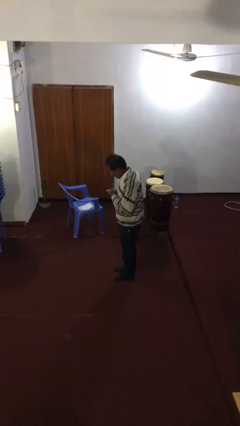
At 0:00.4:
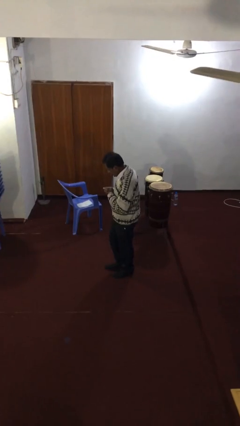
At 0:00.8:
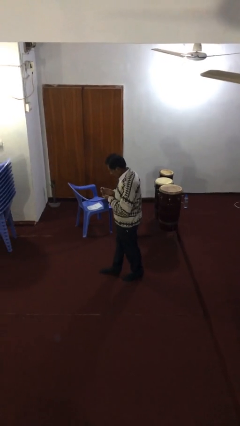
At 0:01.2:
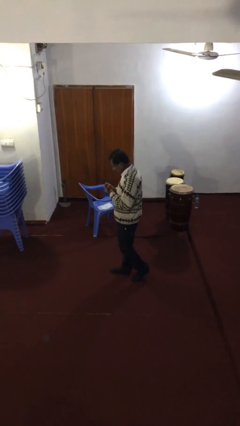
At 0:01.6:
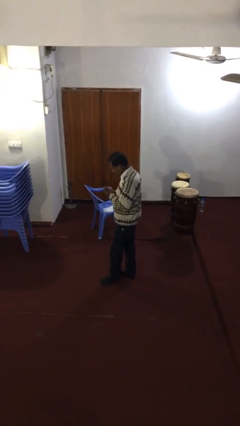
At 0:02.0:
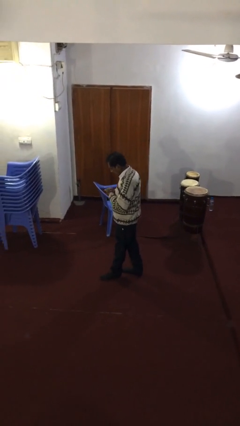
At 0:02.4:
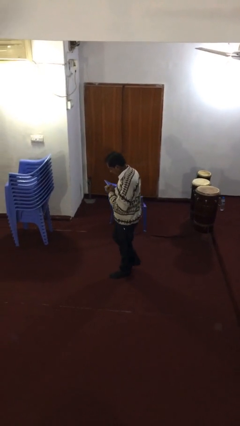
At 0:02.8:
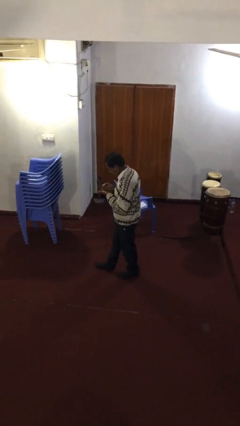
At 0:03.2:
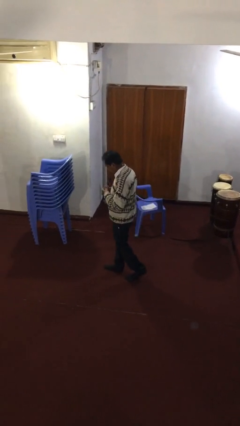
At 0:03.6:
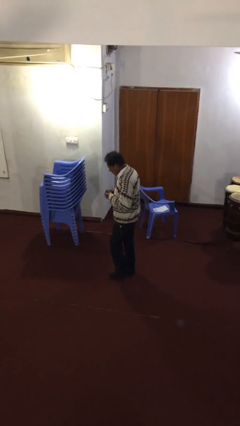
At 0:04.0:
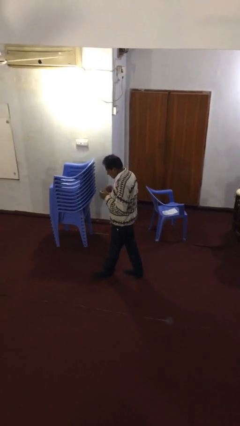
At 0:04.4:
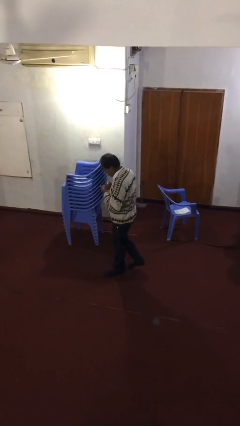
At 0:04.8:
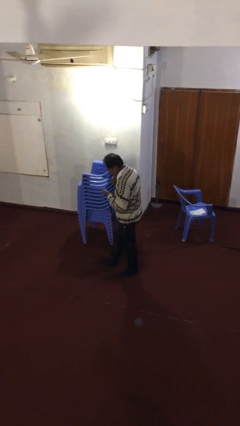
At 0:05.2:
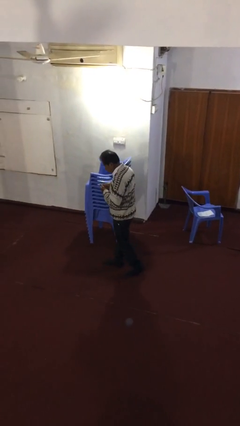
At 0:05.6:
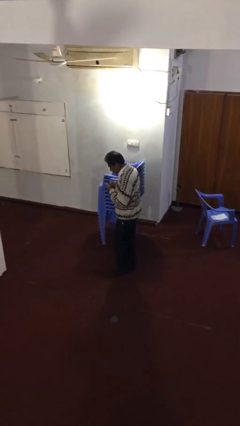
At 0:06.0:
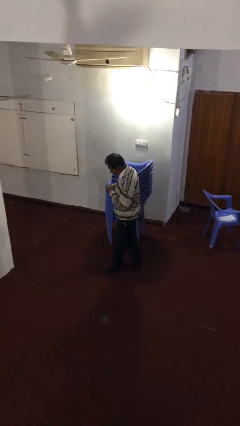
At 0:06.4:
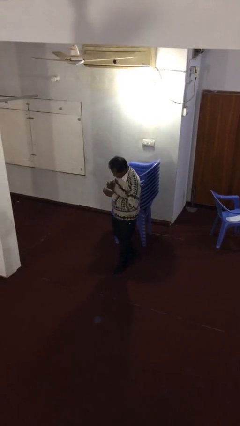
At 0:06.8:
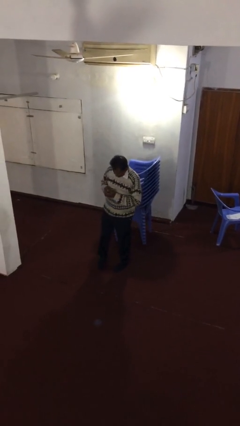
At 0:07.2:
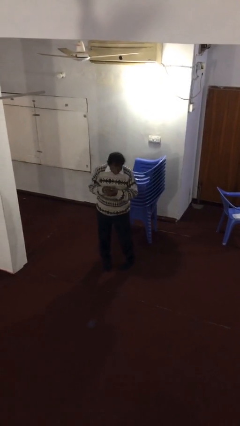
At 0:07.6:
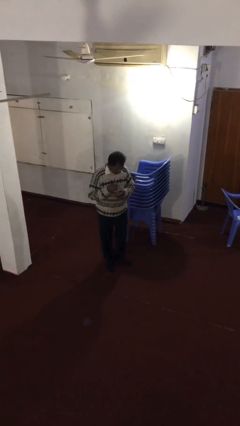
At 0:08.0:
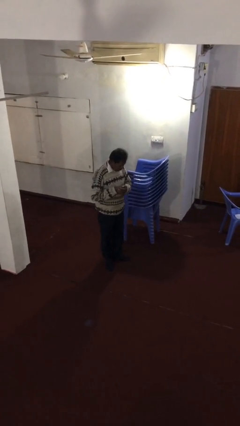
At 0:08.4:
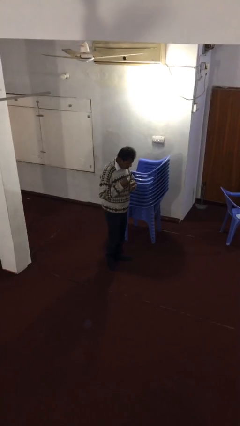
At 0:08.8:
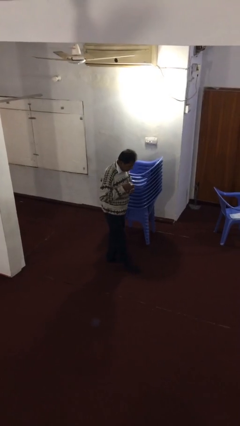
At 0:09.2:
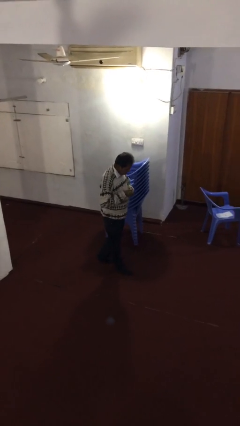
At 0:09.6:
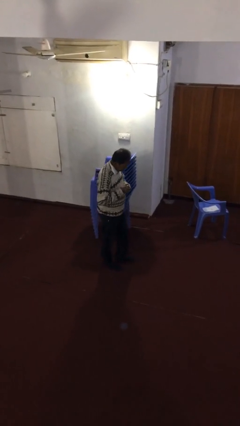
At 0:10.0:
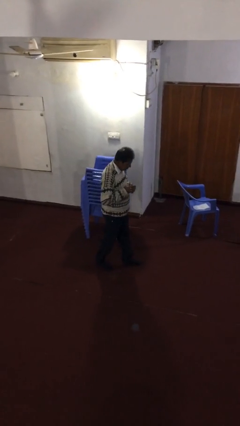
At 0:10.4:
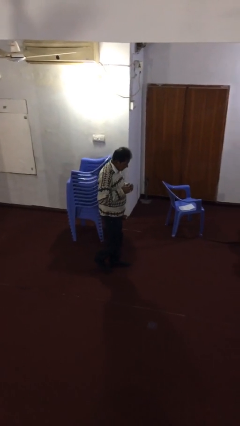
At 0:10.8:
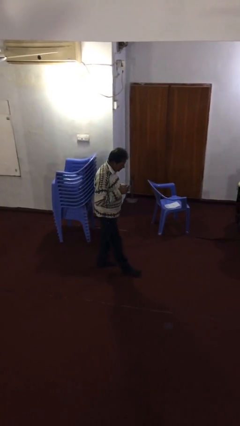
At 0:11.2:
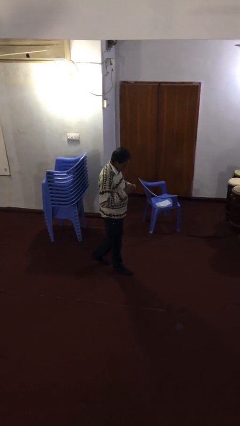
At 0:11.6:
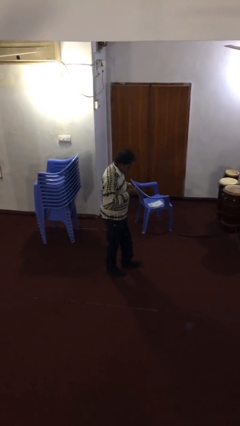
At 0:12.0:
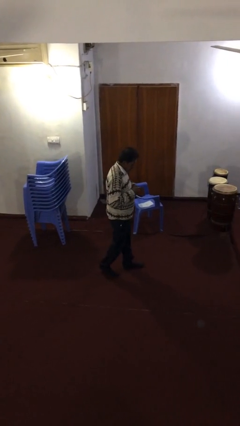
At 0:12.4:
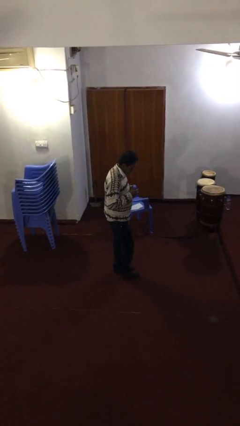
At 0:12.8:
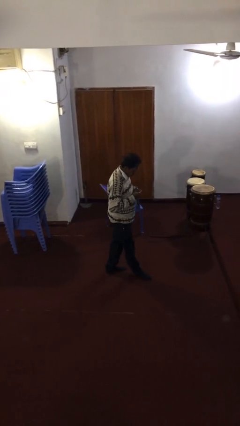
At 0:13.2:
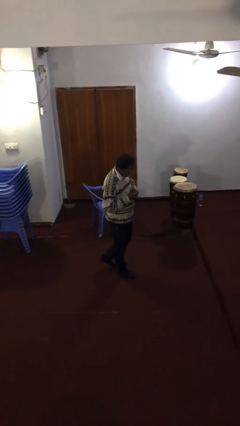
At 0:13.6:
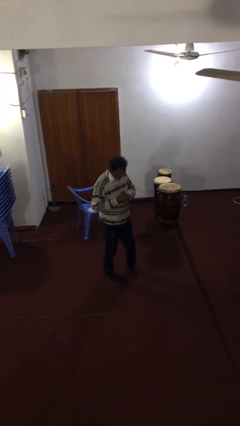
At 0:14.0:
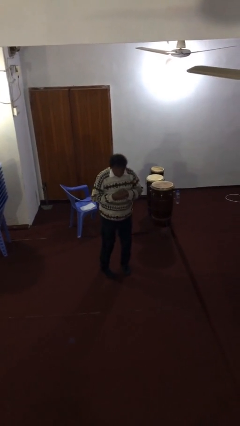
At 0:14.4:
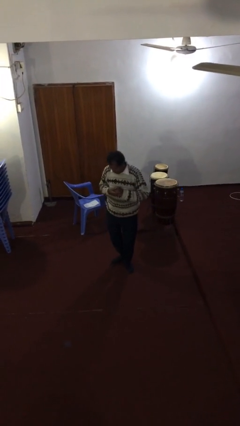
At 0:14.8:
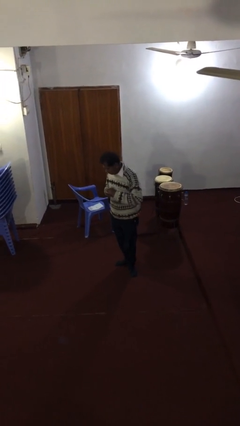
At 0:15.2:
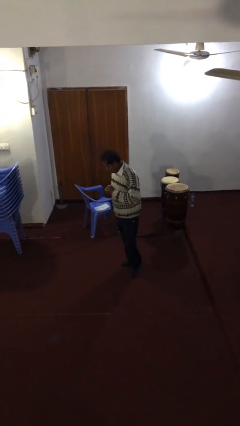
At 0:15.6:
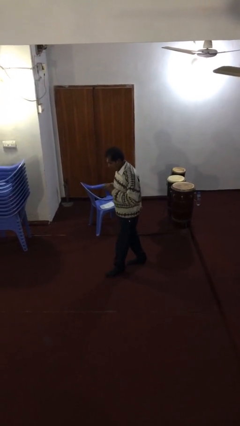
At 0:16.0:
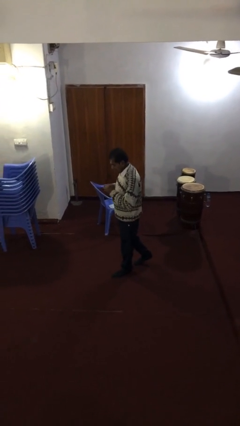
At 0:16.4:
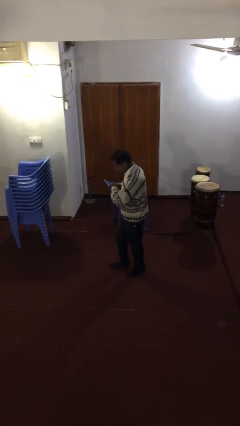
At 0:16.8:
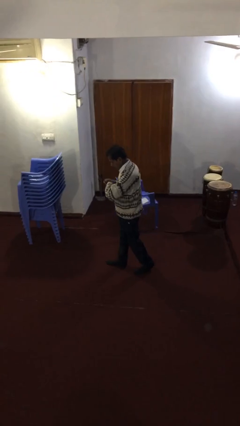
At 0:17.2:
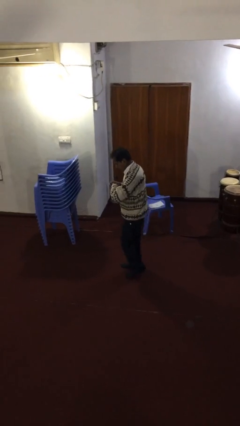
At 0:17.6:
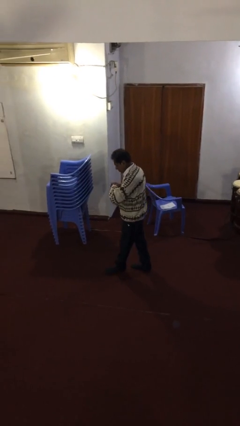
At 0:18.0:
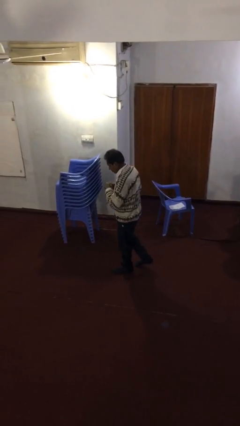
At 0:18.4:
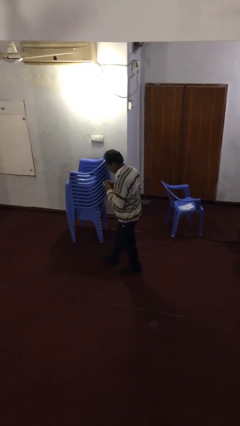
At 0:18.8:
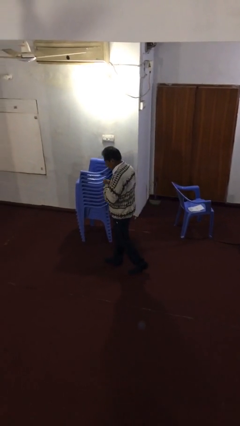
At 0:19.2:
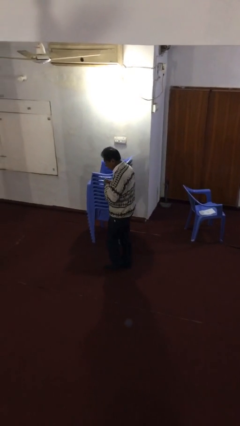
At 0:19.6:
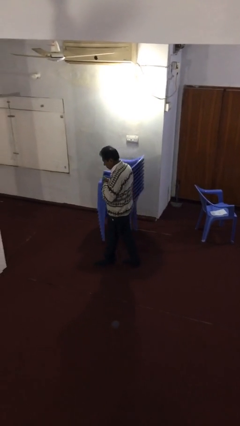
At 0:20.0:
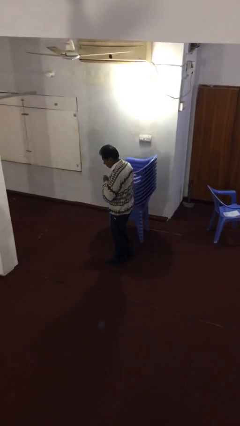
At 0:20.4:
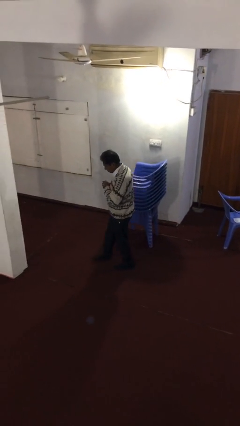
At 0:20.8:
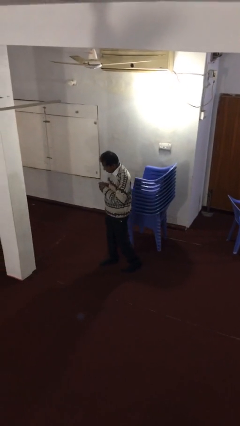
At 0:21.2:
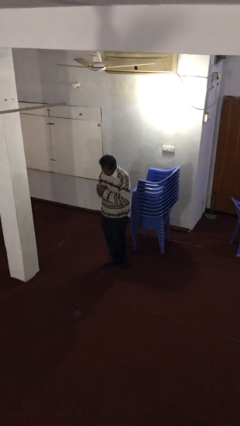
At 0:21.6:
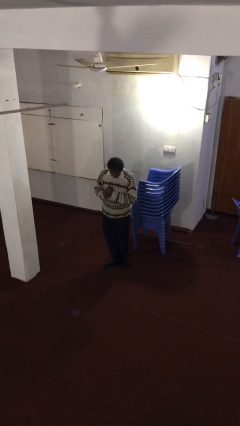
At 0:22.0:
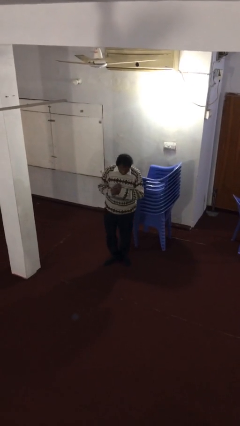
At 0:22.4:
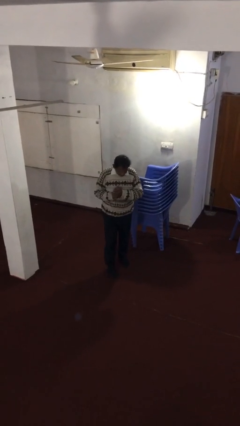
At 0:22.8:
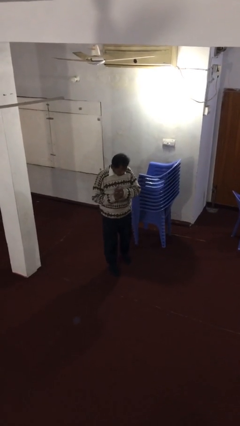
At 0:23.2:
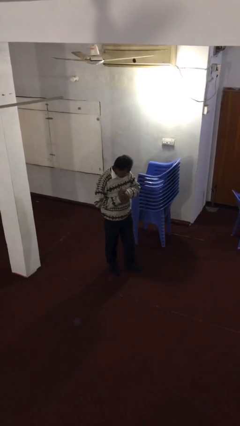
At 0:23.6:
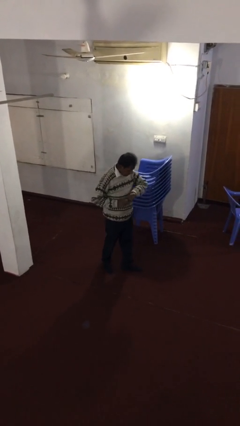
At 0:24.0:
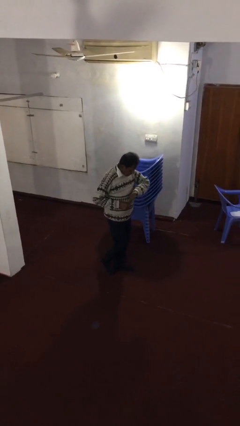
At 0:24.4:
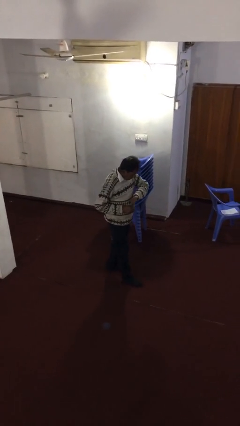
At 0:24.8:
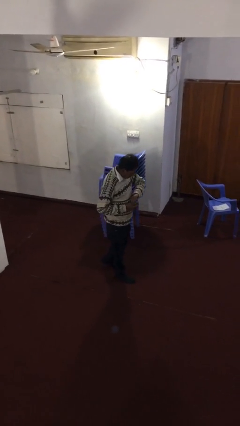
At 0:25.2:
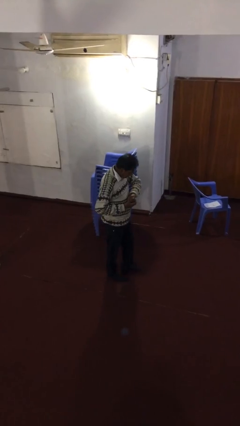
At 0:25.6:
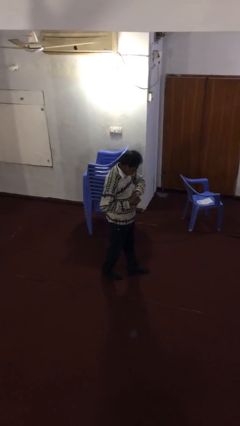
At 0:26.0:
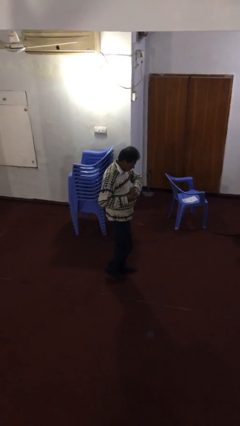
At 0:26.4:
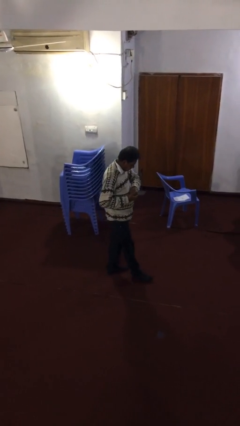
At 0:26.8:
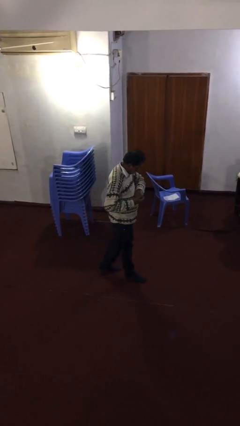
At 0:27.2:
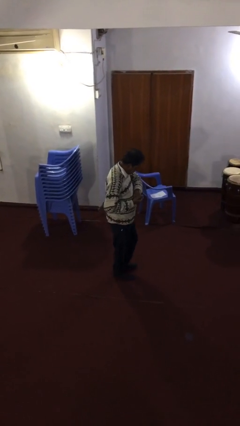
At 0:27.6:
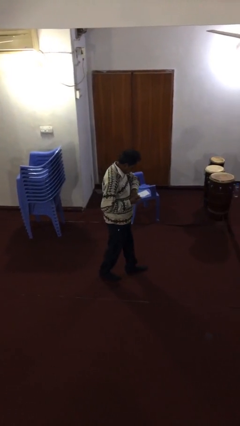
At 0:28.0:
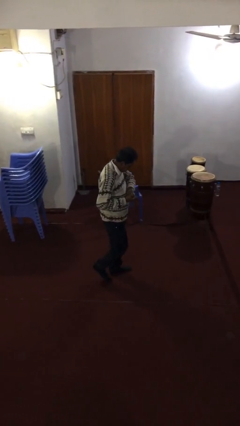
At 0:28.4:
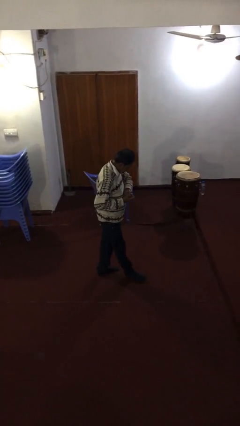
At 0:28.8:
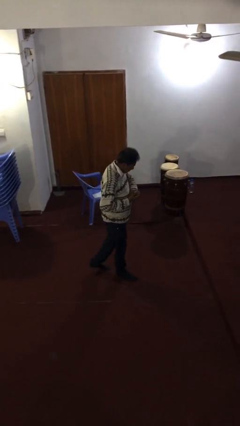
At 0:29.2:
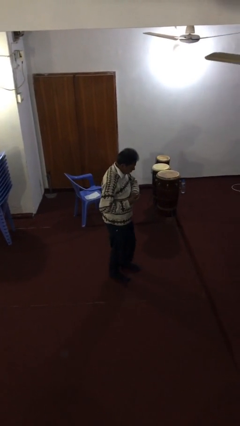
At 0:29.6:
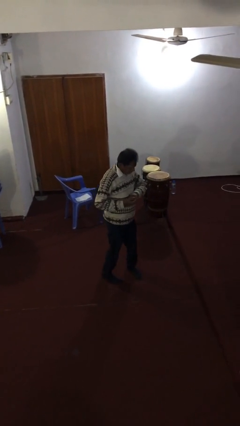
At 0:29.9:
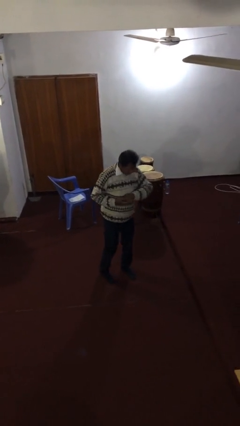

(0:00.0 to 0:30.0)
person walks

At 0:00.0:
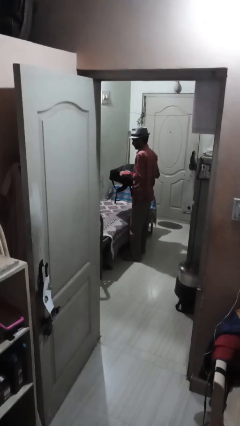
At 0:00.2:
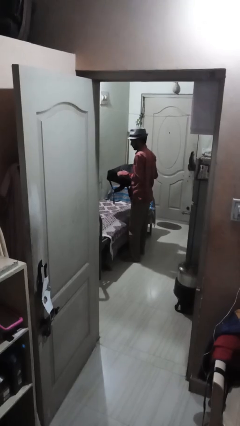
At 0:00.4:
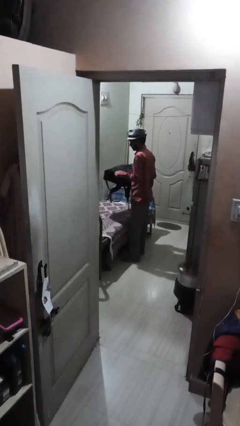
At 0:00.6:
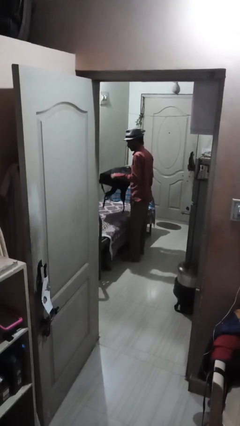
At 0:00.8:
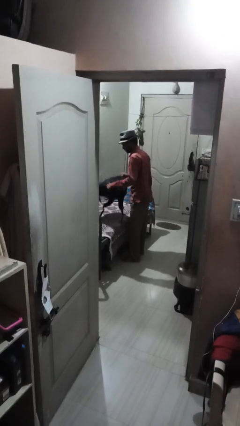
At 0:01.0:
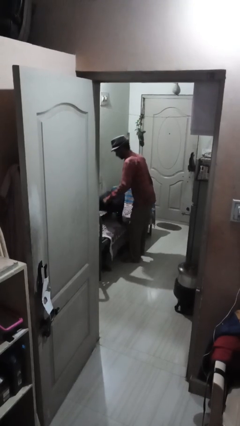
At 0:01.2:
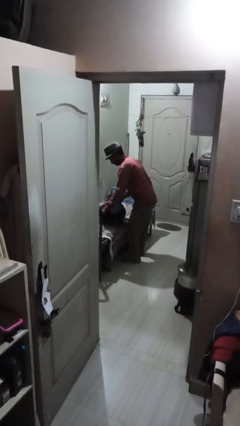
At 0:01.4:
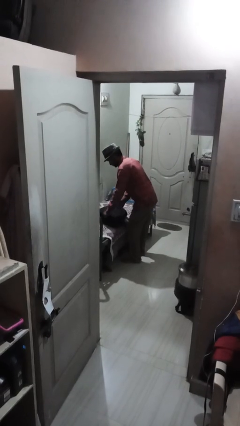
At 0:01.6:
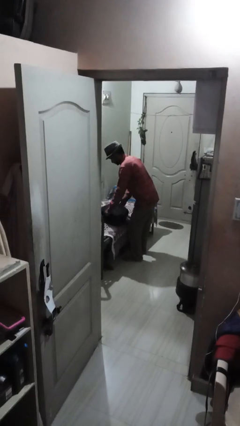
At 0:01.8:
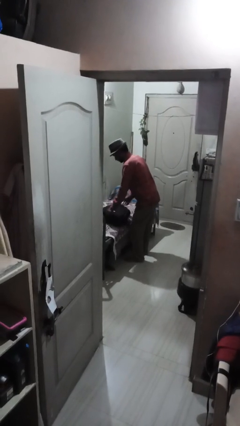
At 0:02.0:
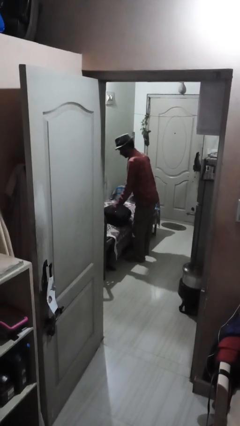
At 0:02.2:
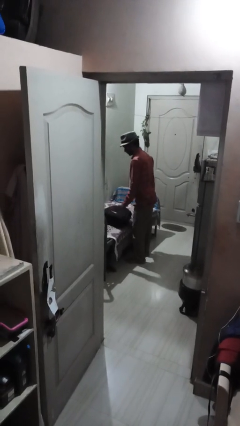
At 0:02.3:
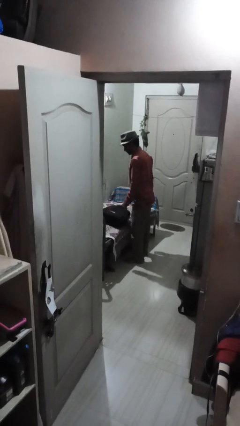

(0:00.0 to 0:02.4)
person puts down object on couch

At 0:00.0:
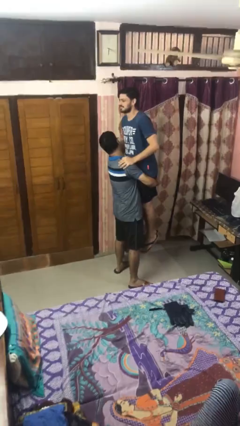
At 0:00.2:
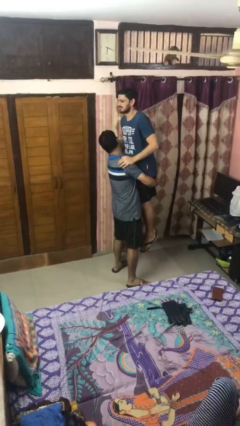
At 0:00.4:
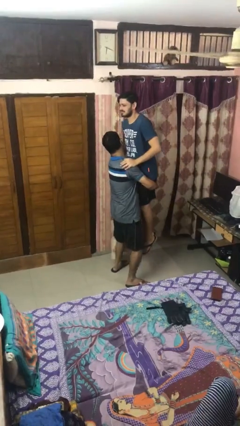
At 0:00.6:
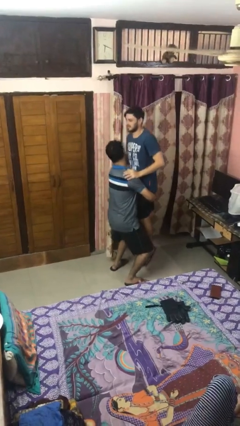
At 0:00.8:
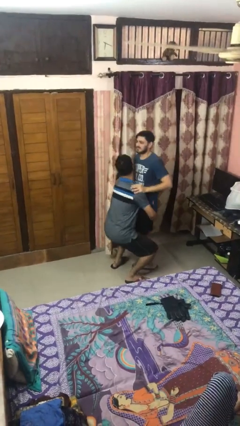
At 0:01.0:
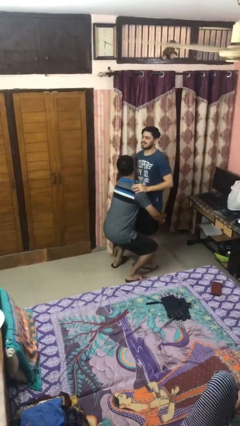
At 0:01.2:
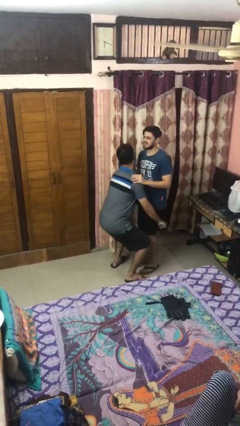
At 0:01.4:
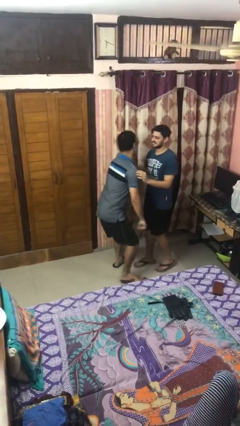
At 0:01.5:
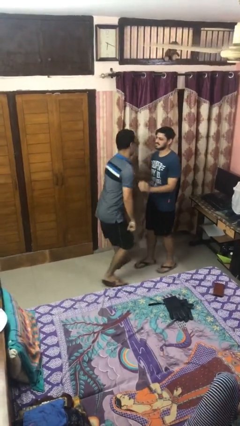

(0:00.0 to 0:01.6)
person puts down person
